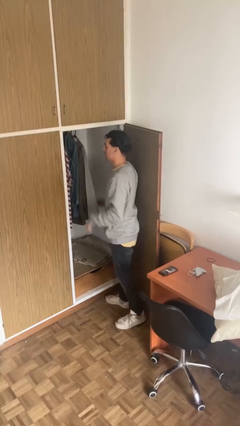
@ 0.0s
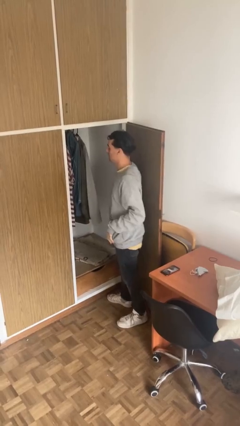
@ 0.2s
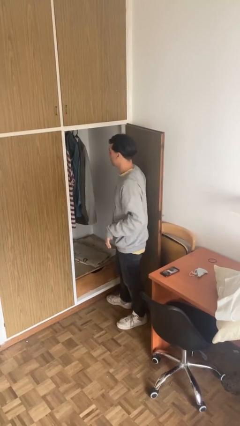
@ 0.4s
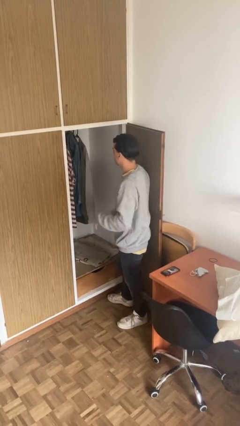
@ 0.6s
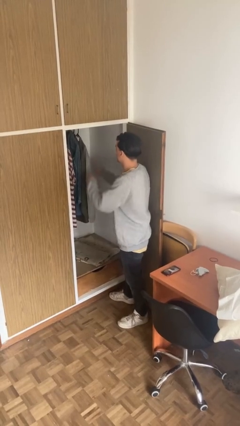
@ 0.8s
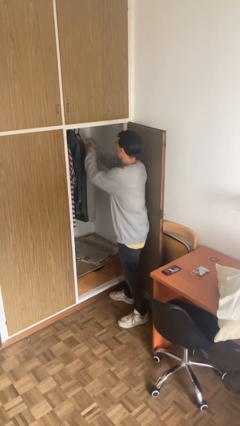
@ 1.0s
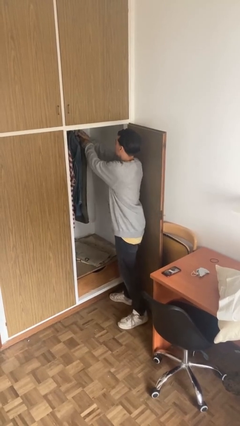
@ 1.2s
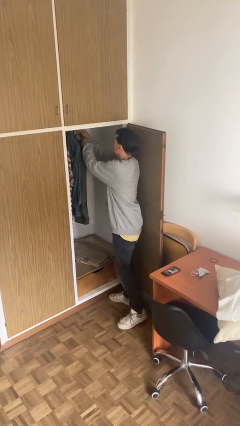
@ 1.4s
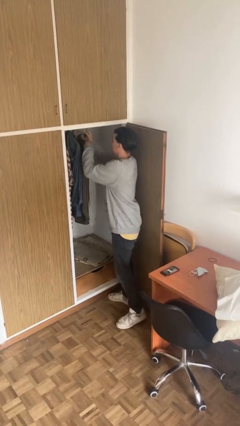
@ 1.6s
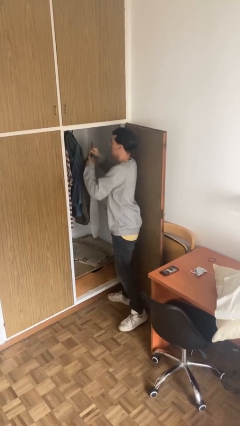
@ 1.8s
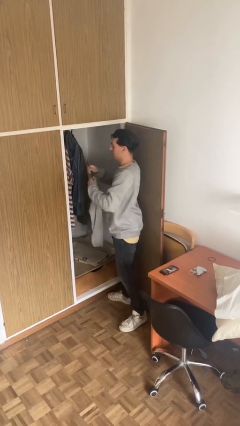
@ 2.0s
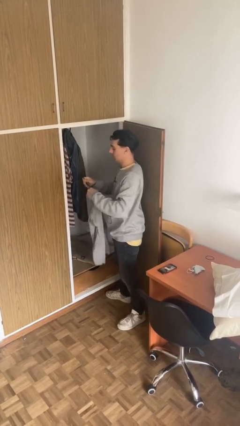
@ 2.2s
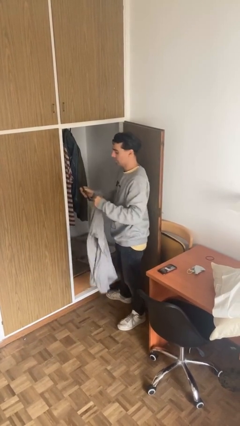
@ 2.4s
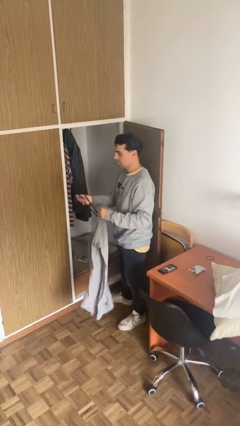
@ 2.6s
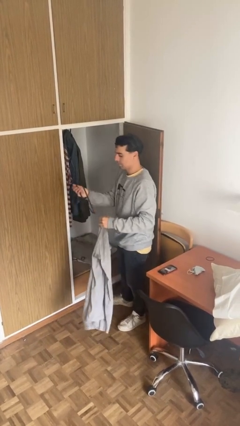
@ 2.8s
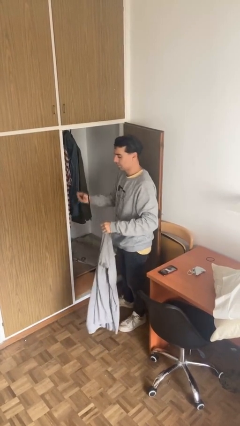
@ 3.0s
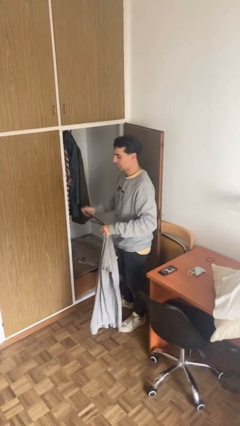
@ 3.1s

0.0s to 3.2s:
person takes clothes from closet

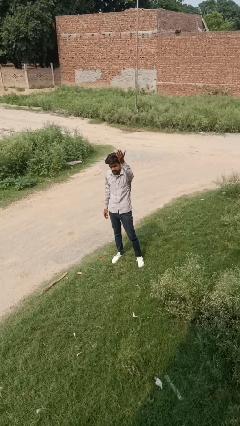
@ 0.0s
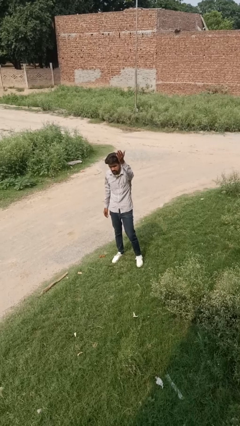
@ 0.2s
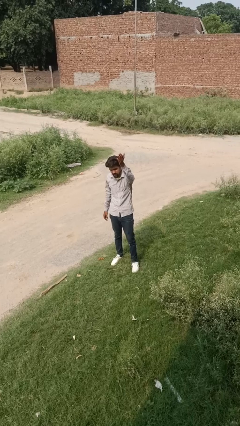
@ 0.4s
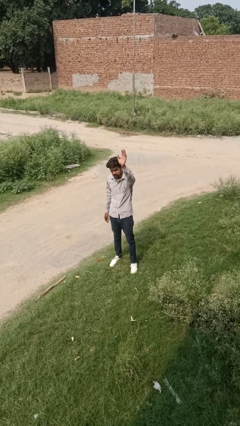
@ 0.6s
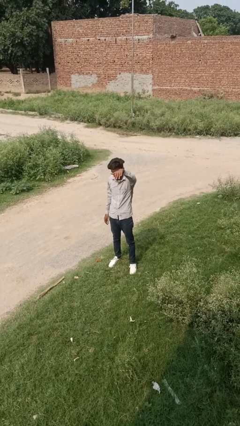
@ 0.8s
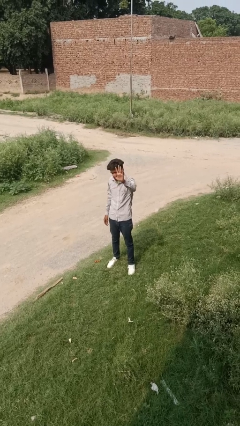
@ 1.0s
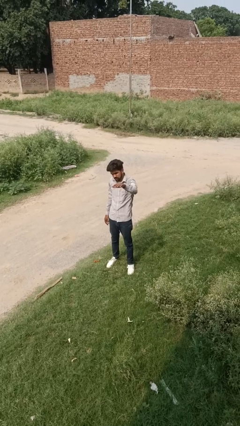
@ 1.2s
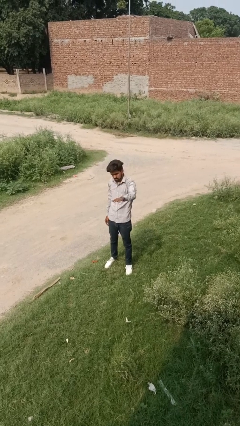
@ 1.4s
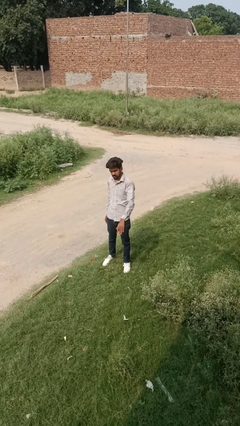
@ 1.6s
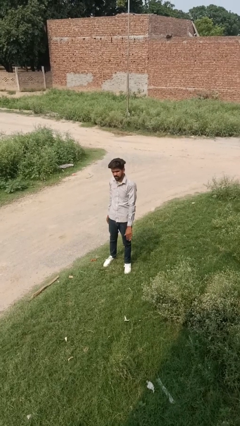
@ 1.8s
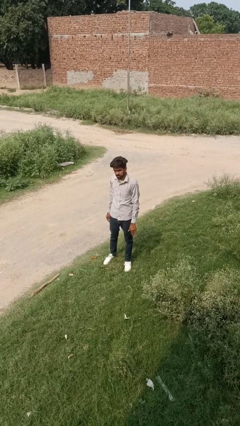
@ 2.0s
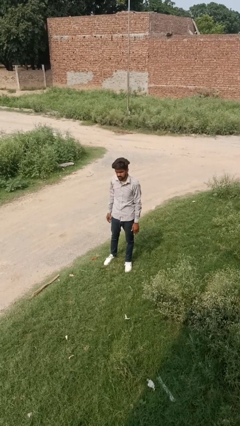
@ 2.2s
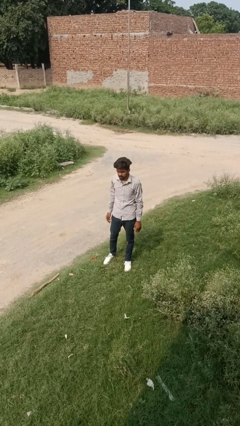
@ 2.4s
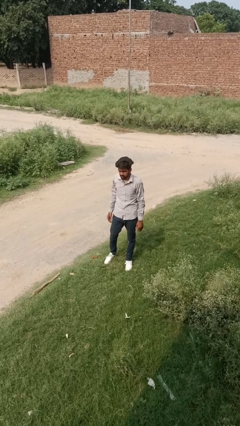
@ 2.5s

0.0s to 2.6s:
person gestures swipe down

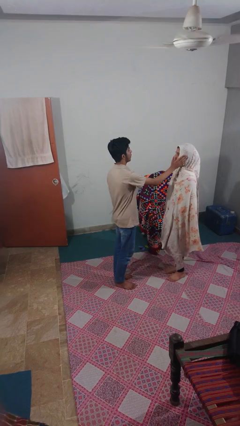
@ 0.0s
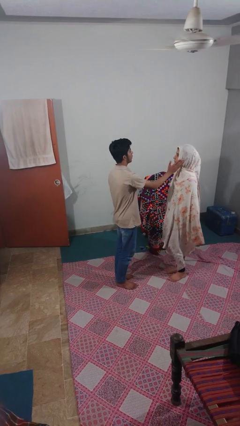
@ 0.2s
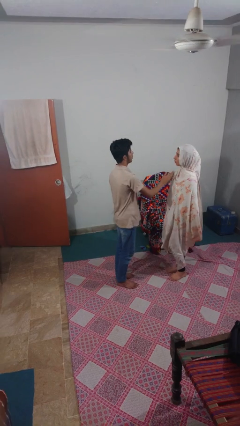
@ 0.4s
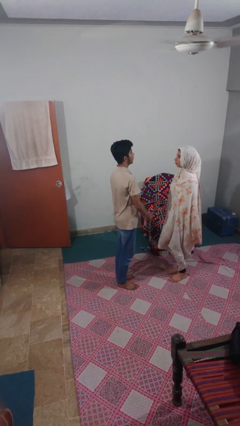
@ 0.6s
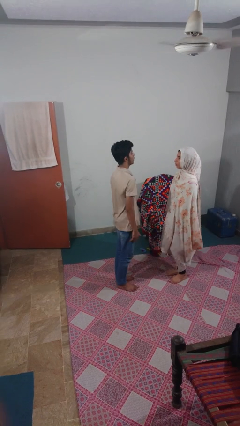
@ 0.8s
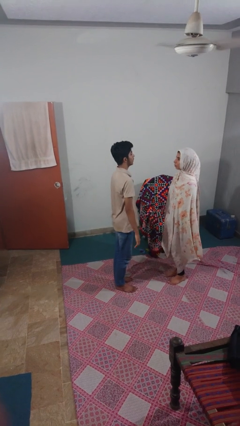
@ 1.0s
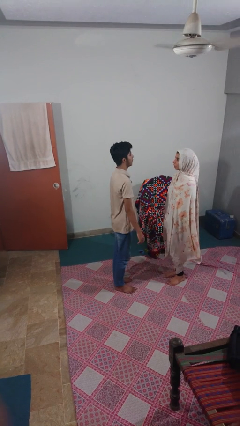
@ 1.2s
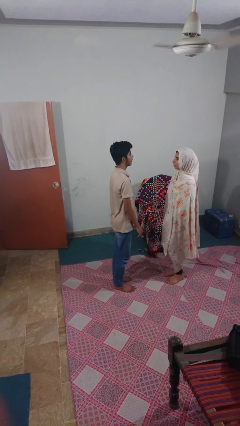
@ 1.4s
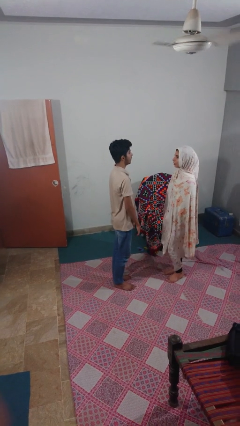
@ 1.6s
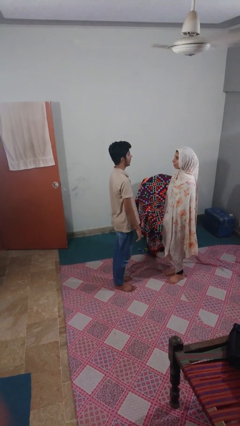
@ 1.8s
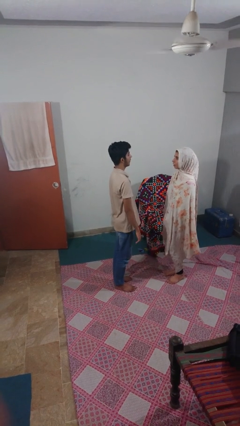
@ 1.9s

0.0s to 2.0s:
person touches face of person

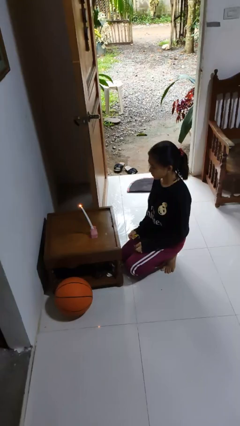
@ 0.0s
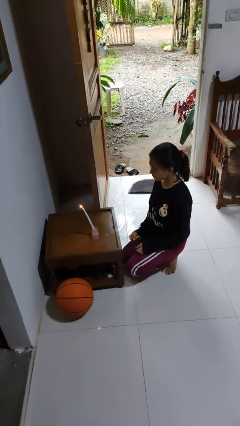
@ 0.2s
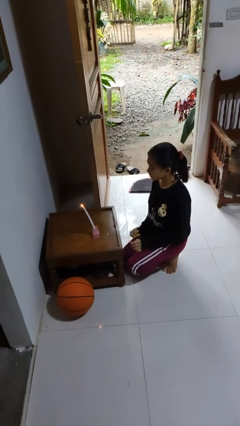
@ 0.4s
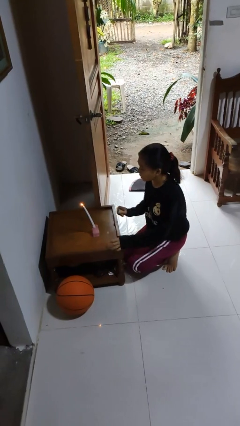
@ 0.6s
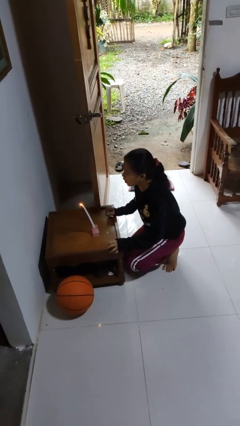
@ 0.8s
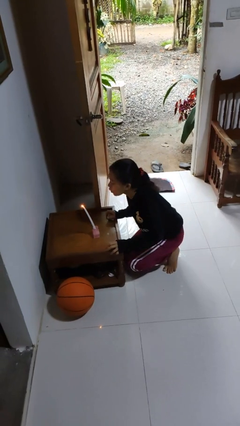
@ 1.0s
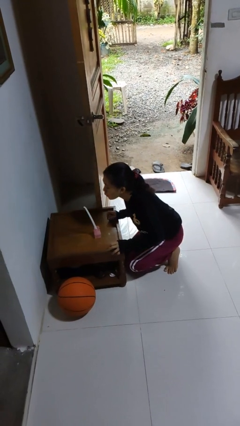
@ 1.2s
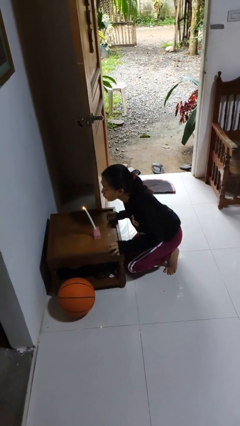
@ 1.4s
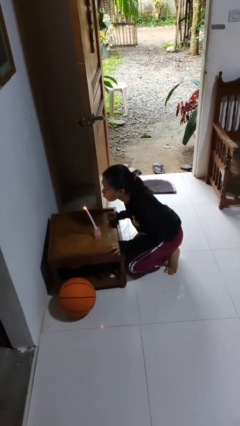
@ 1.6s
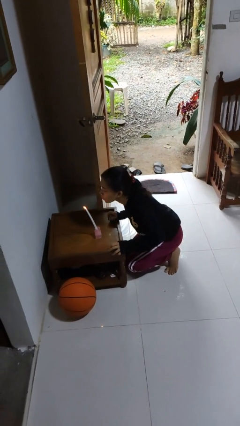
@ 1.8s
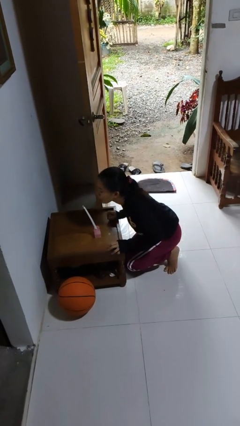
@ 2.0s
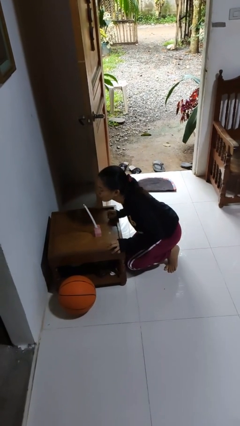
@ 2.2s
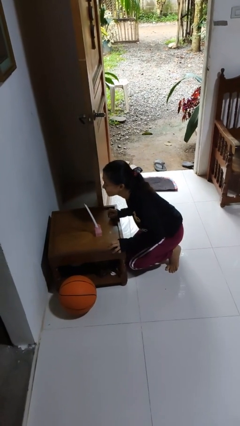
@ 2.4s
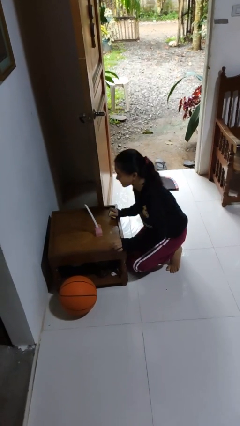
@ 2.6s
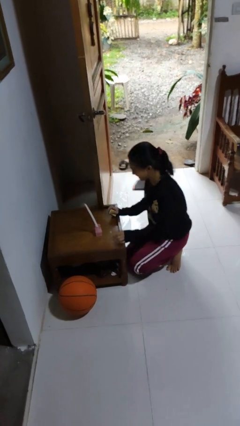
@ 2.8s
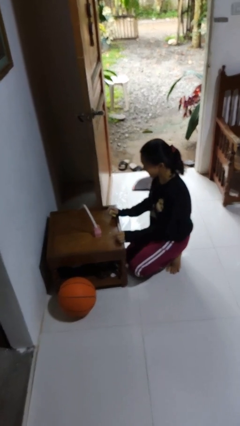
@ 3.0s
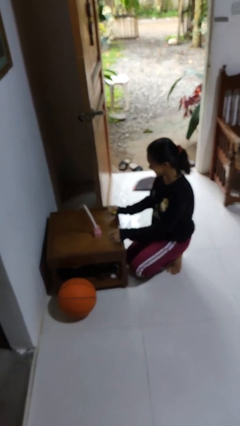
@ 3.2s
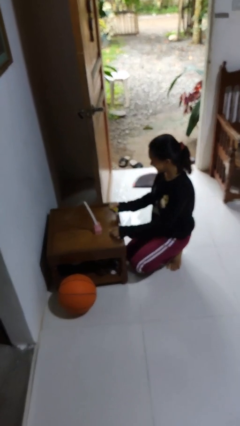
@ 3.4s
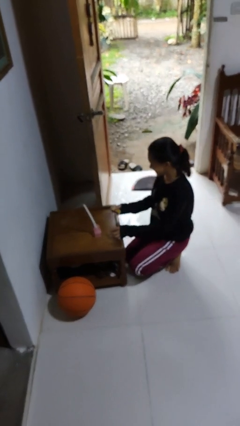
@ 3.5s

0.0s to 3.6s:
person extinguishes candle

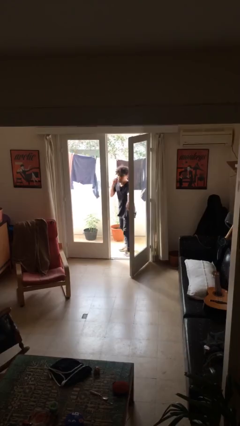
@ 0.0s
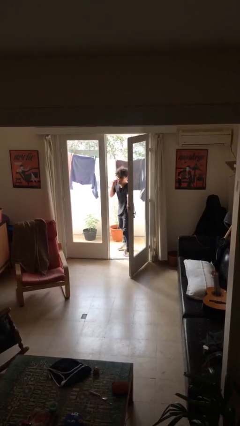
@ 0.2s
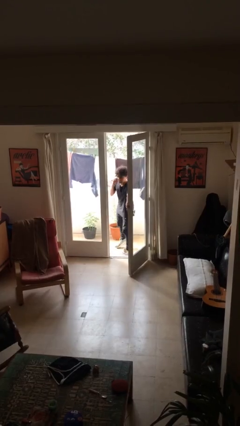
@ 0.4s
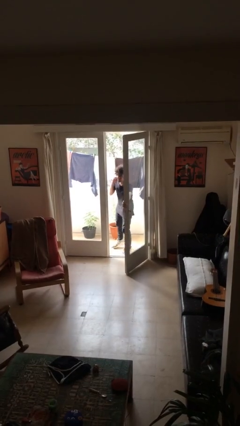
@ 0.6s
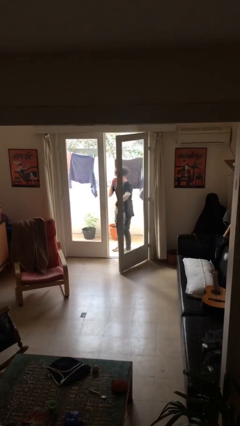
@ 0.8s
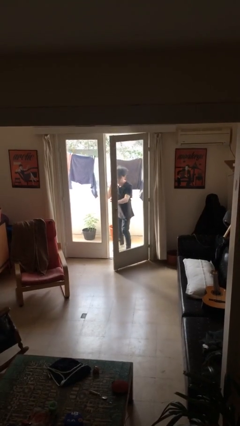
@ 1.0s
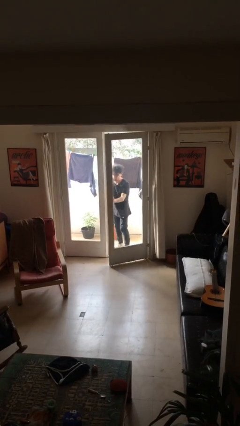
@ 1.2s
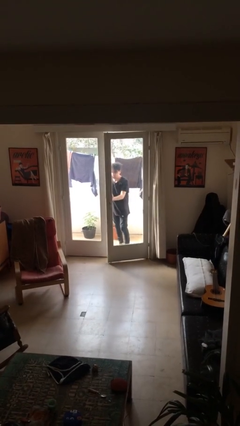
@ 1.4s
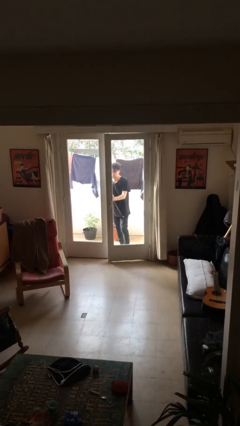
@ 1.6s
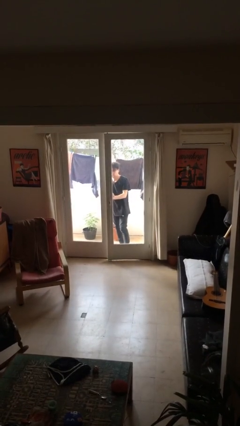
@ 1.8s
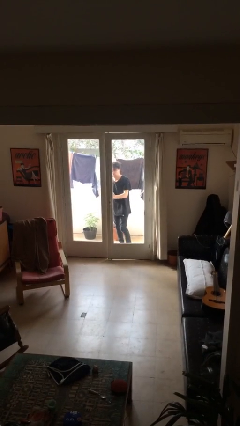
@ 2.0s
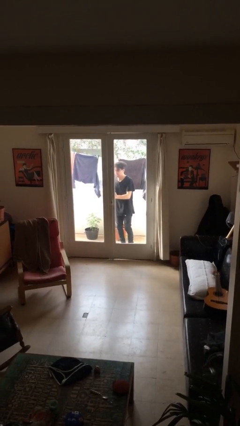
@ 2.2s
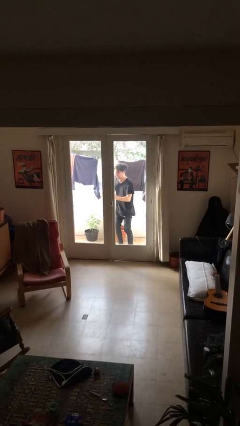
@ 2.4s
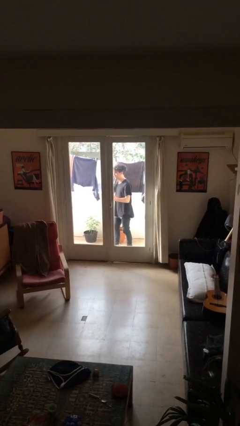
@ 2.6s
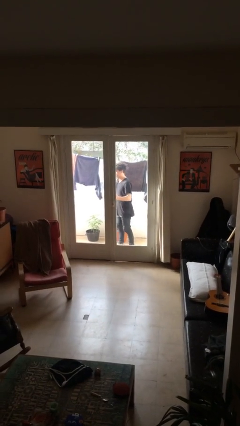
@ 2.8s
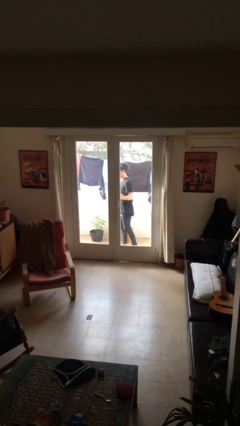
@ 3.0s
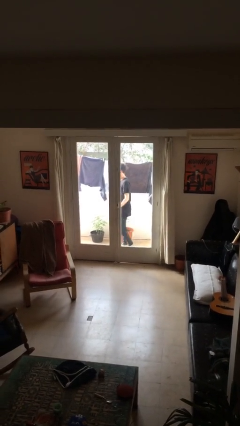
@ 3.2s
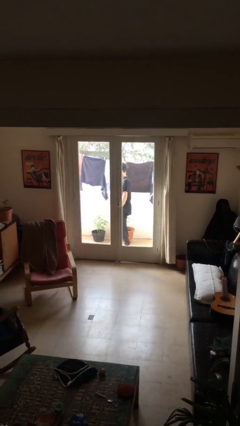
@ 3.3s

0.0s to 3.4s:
person closes facility door

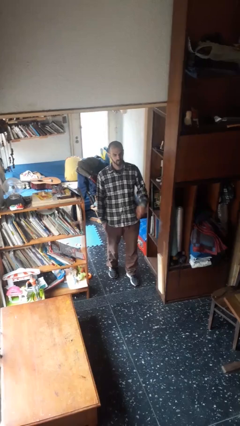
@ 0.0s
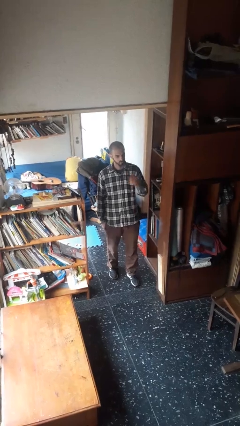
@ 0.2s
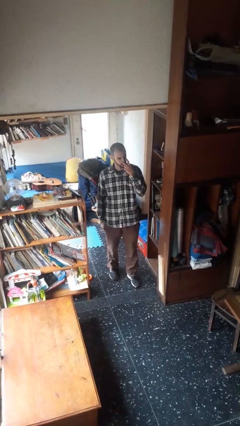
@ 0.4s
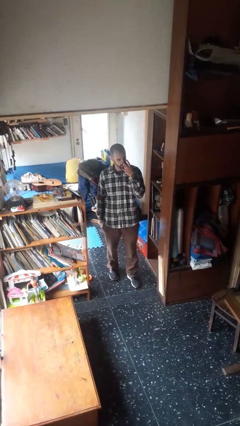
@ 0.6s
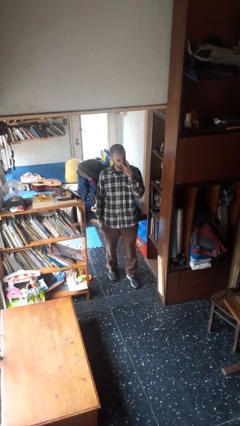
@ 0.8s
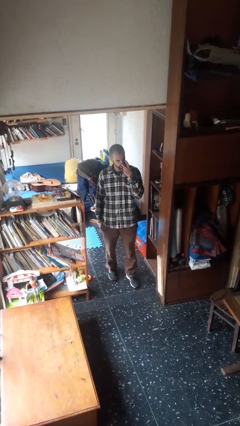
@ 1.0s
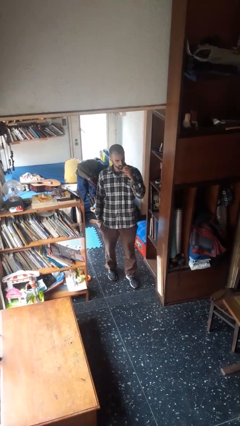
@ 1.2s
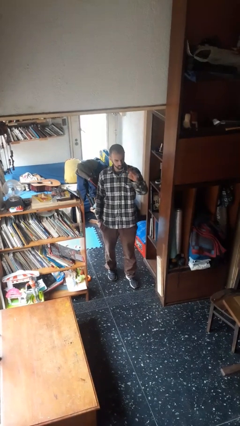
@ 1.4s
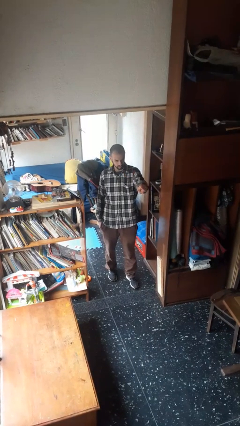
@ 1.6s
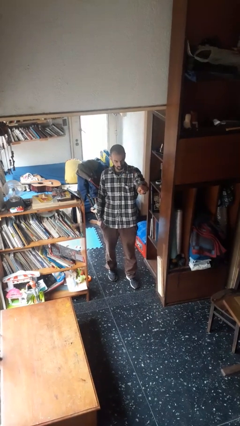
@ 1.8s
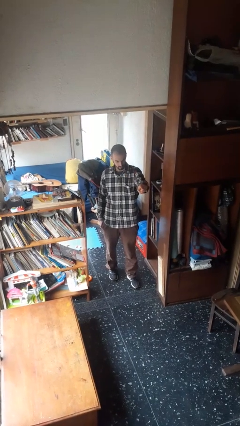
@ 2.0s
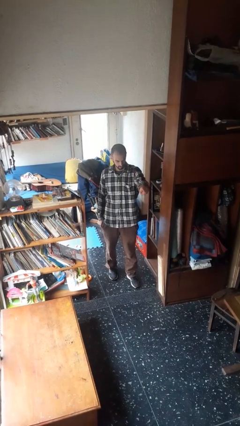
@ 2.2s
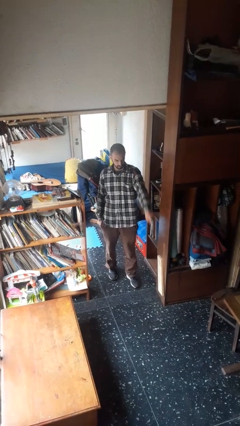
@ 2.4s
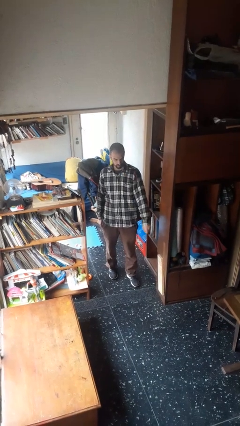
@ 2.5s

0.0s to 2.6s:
person gestures watch closely
